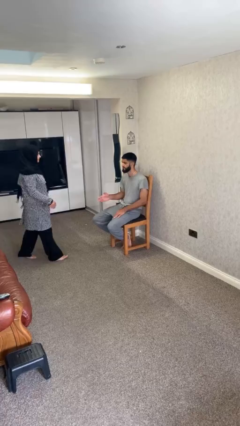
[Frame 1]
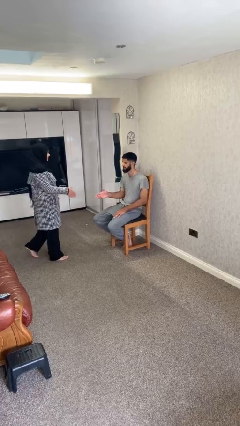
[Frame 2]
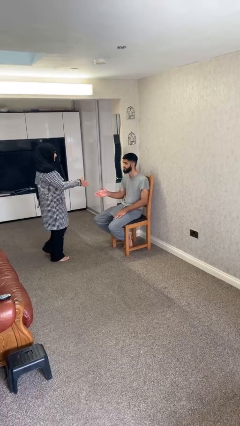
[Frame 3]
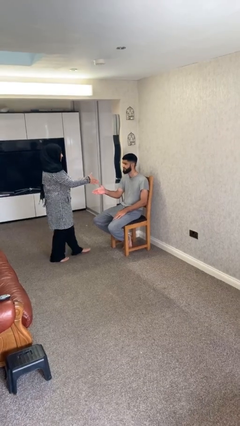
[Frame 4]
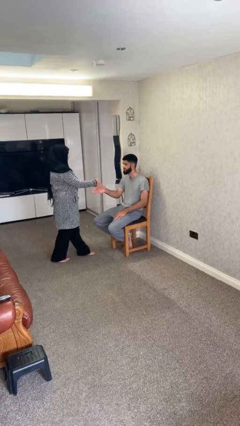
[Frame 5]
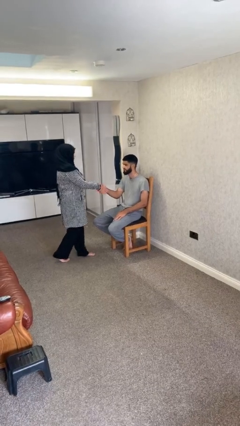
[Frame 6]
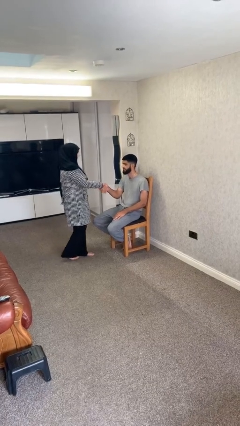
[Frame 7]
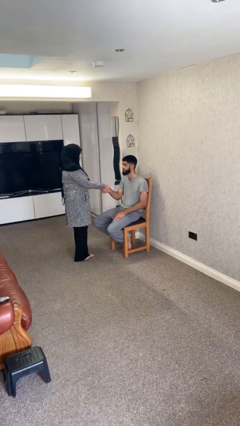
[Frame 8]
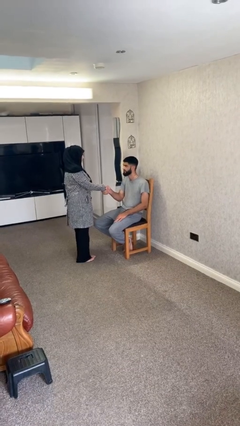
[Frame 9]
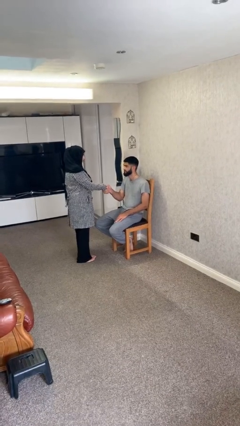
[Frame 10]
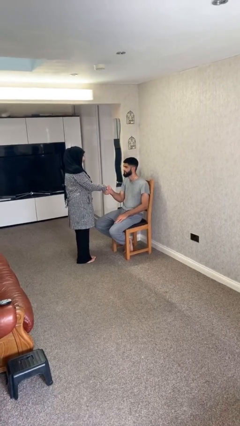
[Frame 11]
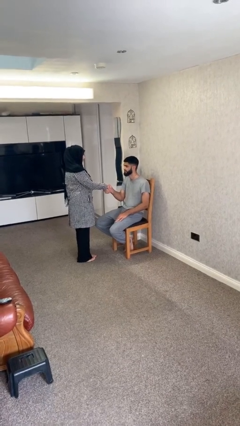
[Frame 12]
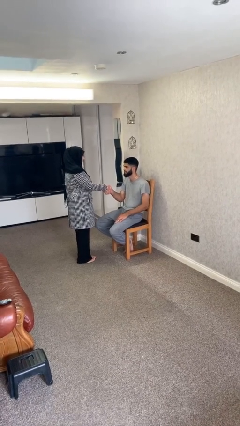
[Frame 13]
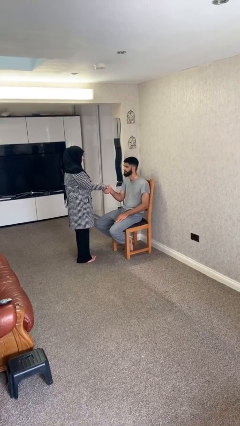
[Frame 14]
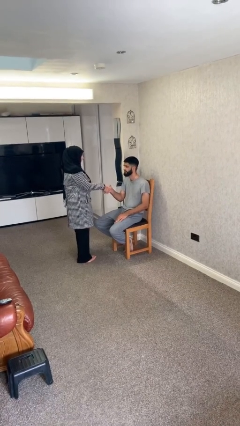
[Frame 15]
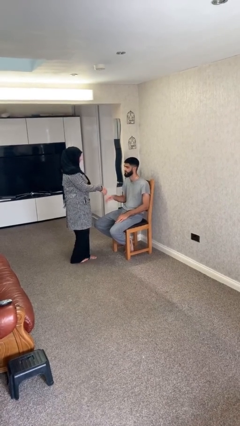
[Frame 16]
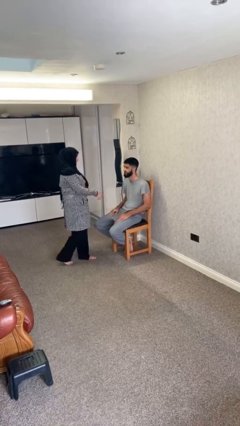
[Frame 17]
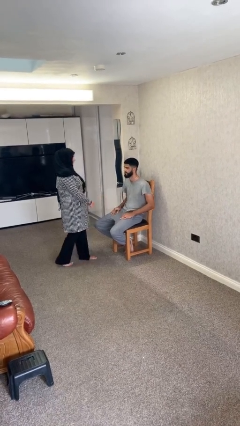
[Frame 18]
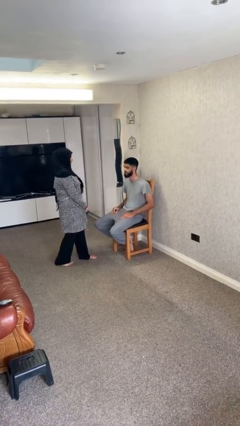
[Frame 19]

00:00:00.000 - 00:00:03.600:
person shakes hand

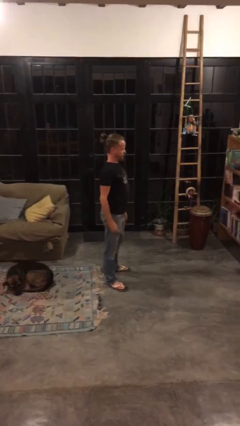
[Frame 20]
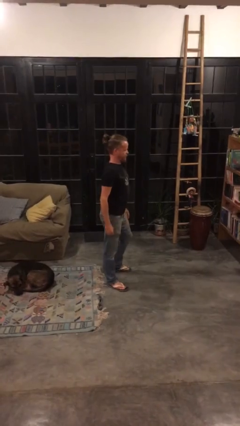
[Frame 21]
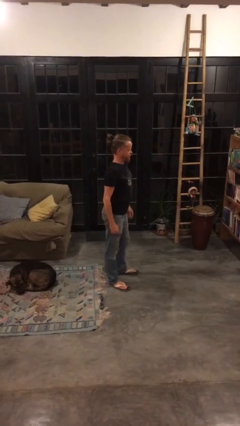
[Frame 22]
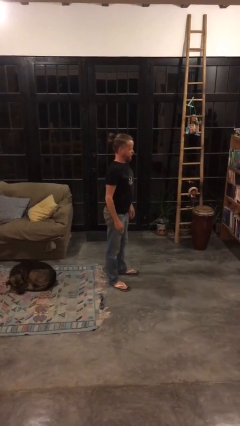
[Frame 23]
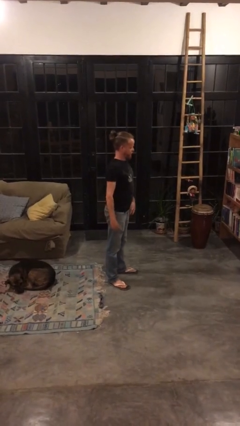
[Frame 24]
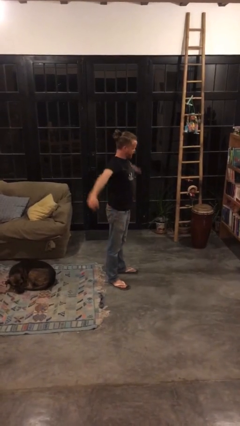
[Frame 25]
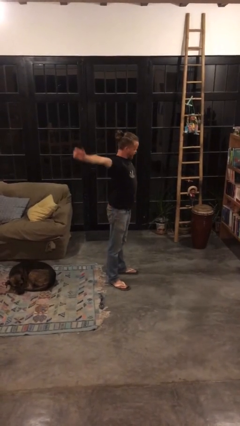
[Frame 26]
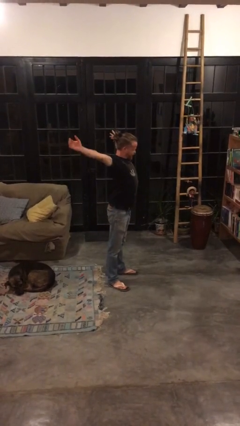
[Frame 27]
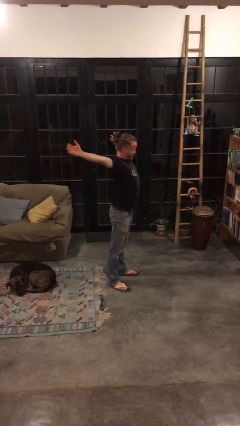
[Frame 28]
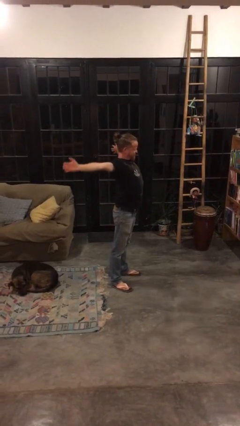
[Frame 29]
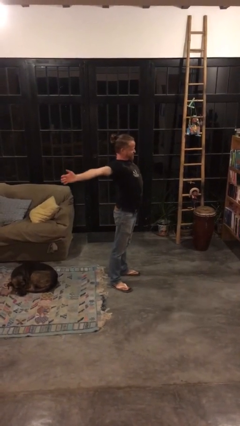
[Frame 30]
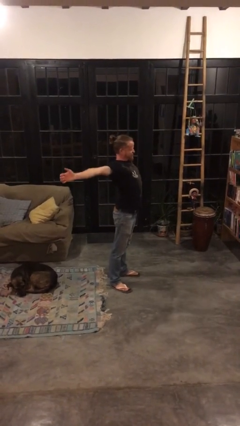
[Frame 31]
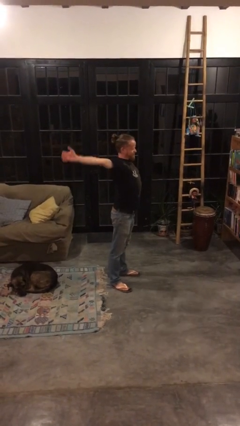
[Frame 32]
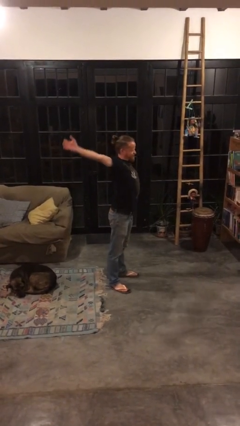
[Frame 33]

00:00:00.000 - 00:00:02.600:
person stretches arms to side

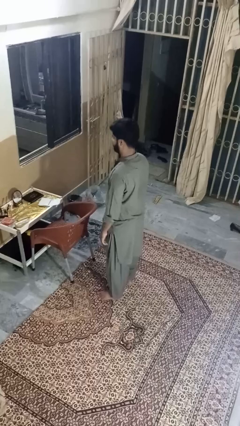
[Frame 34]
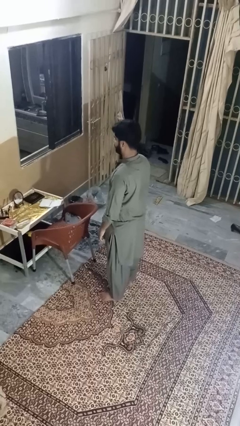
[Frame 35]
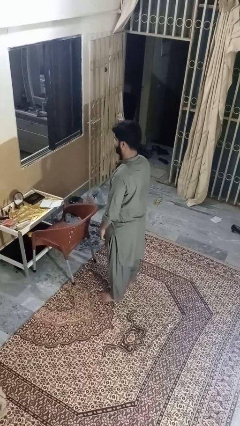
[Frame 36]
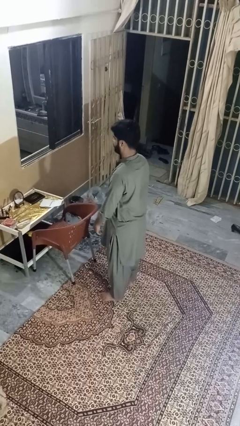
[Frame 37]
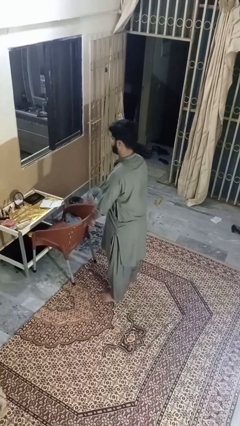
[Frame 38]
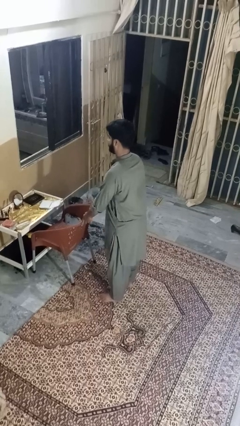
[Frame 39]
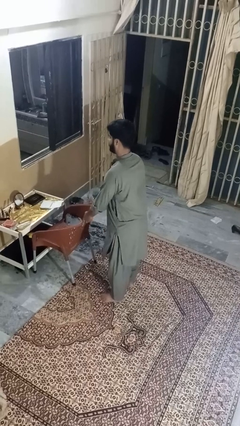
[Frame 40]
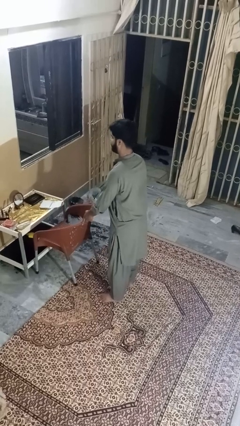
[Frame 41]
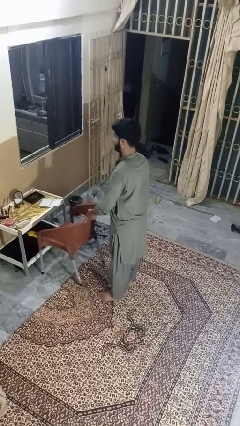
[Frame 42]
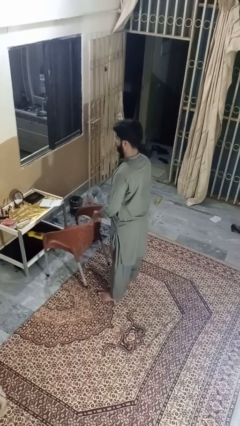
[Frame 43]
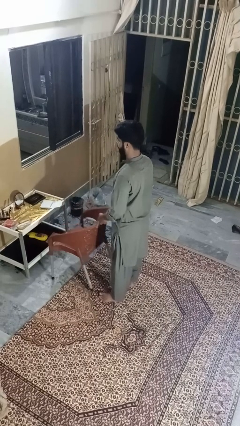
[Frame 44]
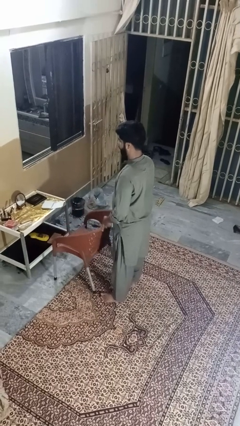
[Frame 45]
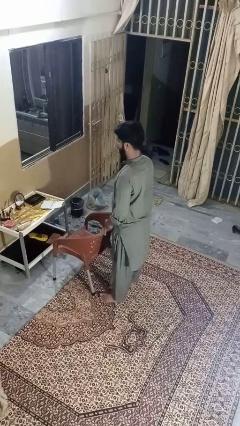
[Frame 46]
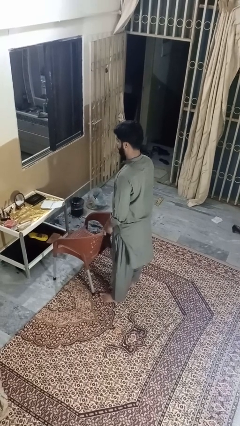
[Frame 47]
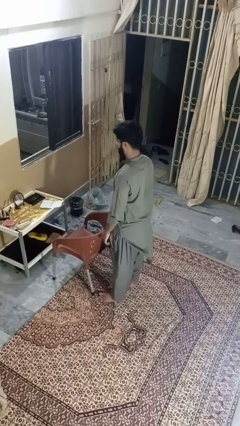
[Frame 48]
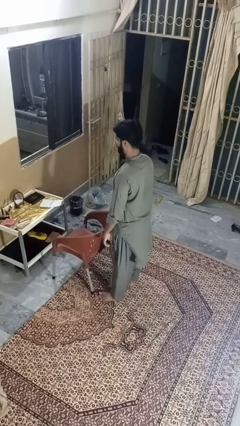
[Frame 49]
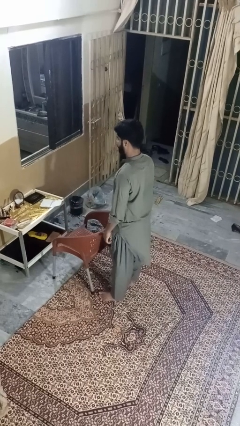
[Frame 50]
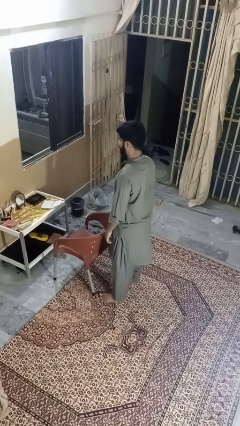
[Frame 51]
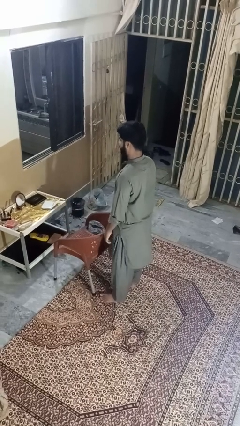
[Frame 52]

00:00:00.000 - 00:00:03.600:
person pulls out chair

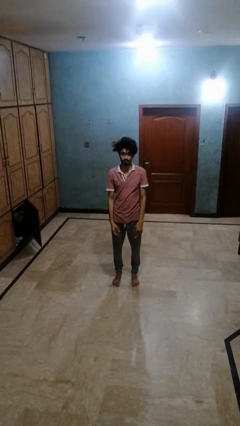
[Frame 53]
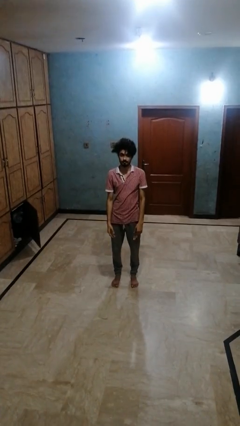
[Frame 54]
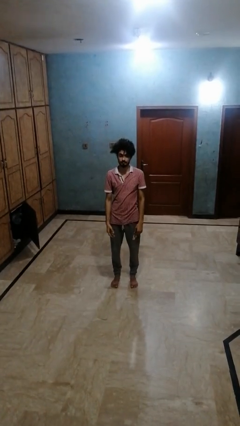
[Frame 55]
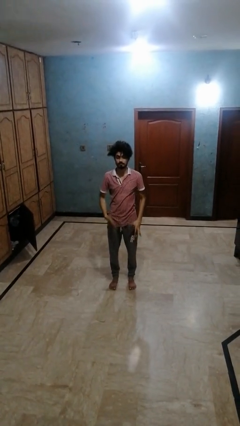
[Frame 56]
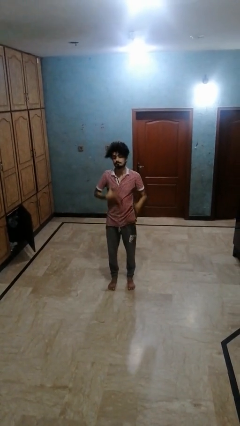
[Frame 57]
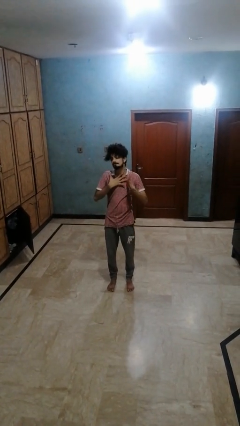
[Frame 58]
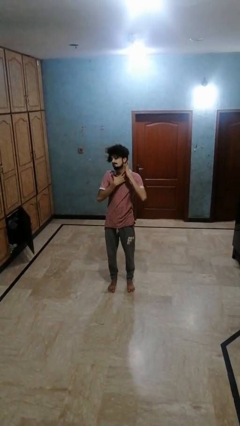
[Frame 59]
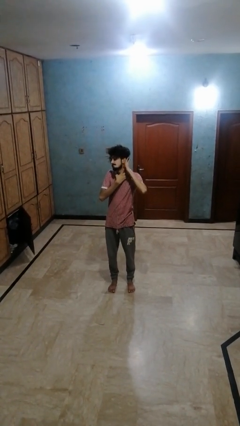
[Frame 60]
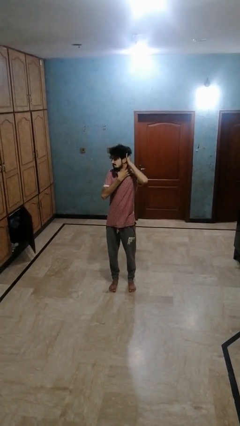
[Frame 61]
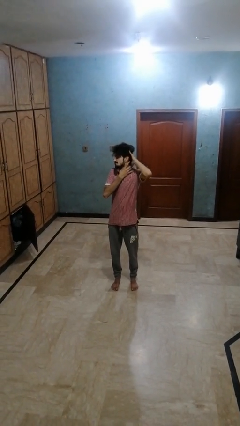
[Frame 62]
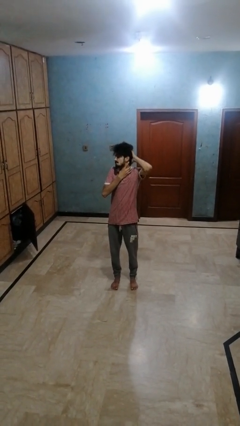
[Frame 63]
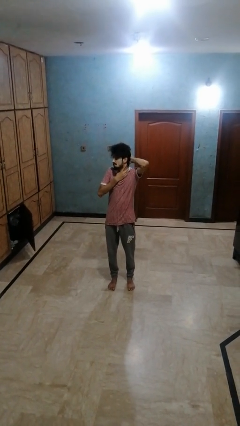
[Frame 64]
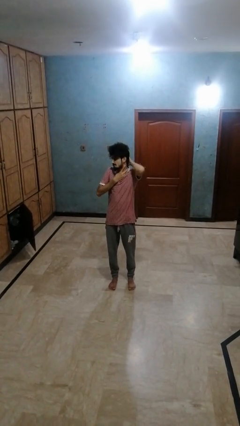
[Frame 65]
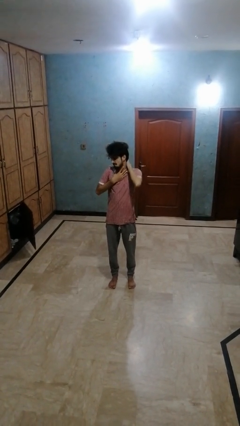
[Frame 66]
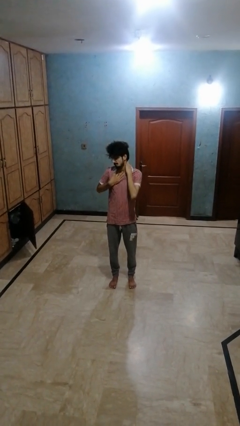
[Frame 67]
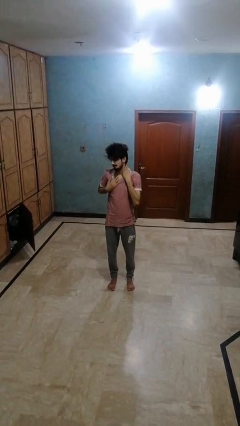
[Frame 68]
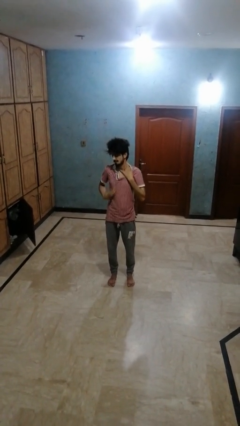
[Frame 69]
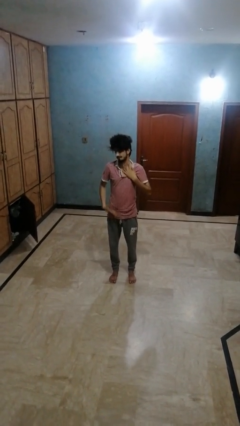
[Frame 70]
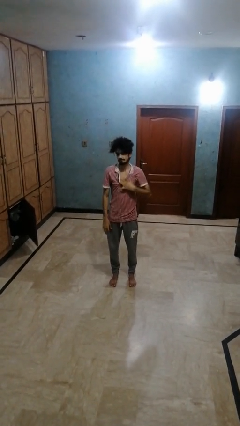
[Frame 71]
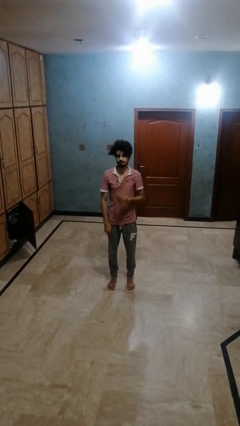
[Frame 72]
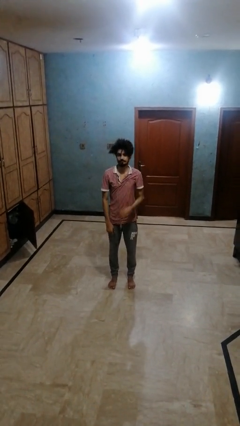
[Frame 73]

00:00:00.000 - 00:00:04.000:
person rubs neck

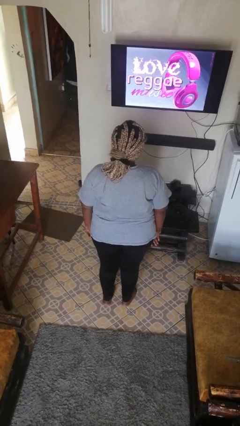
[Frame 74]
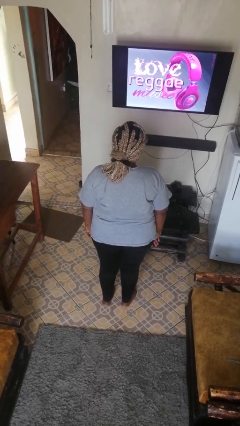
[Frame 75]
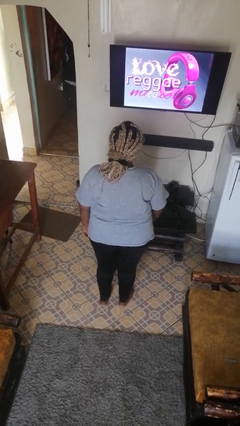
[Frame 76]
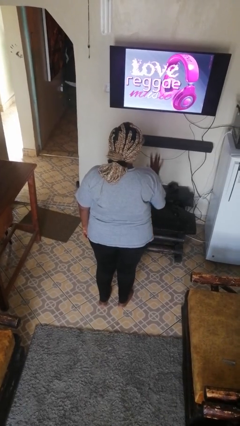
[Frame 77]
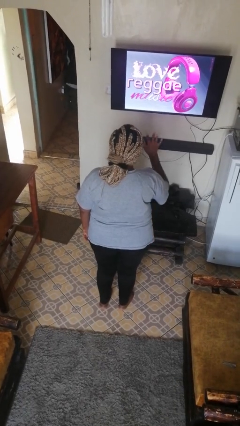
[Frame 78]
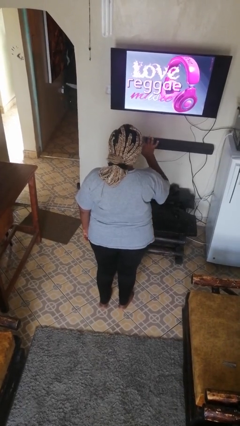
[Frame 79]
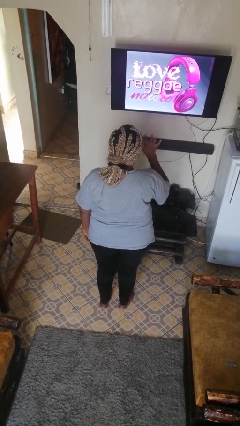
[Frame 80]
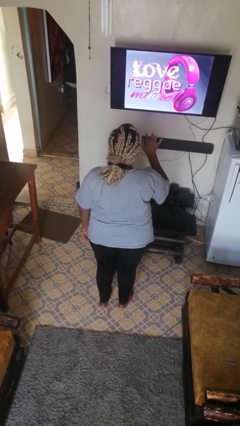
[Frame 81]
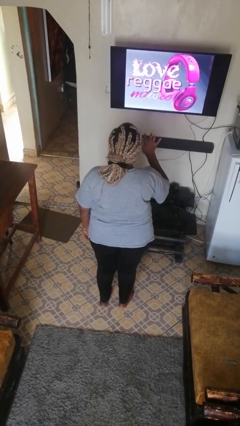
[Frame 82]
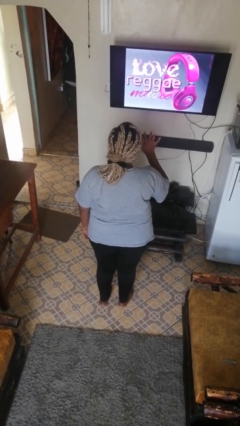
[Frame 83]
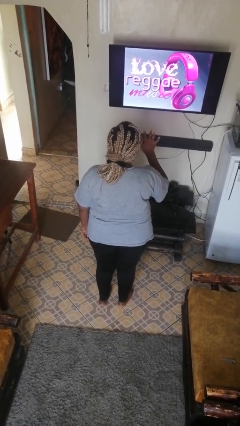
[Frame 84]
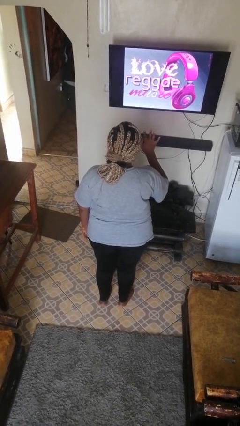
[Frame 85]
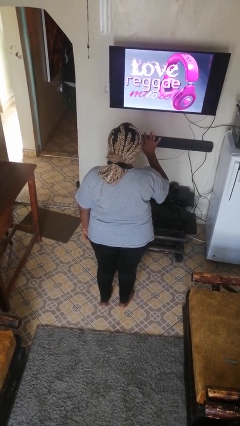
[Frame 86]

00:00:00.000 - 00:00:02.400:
person gestures stop

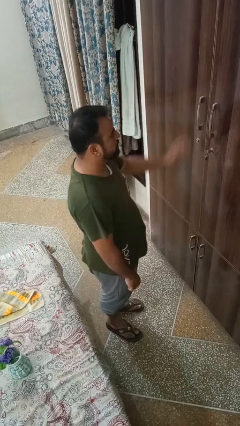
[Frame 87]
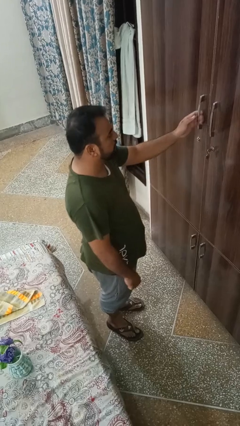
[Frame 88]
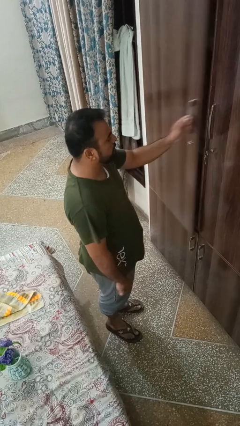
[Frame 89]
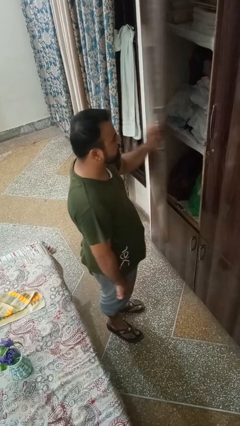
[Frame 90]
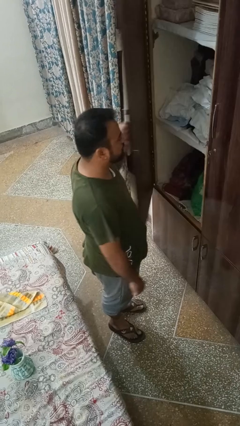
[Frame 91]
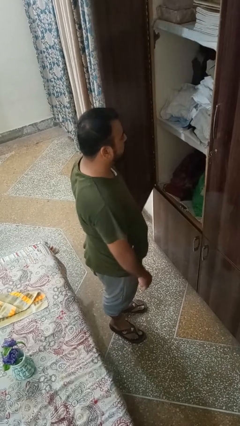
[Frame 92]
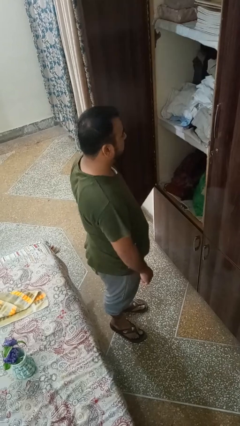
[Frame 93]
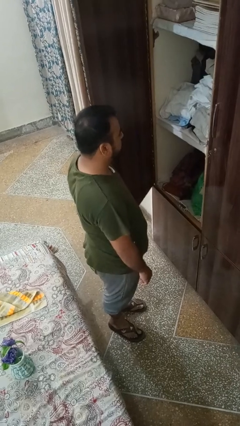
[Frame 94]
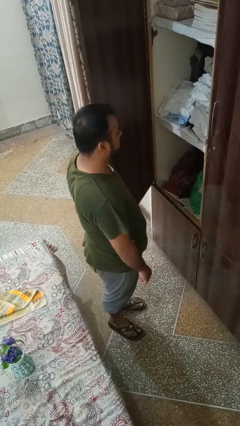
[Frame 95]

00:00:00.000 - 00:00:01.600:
person opens closet door
